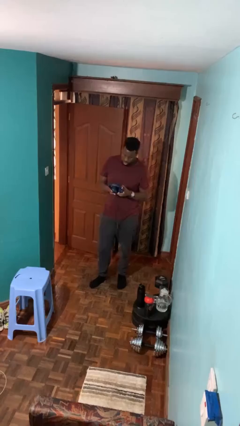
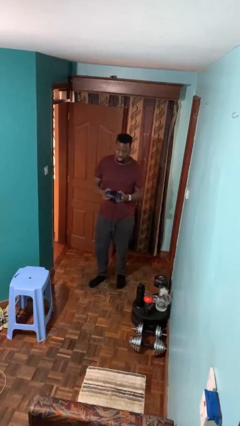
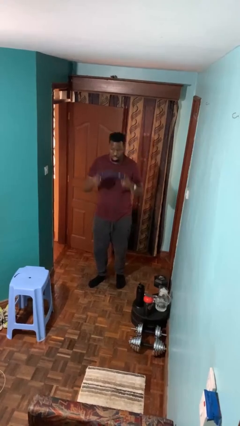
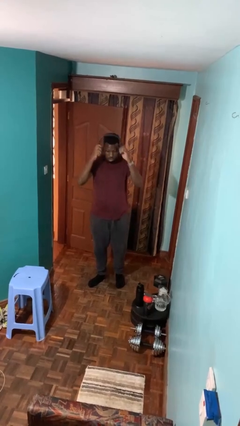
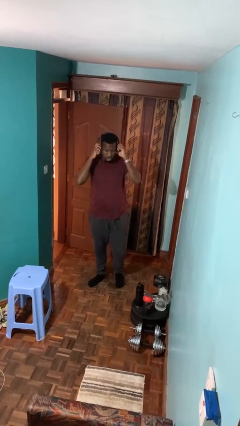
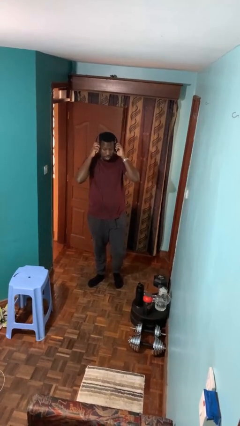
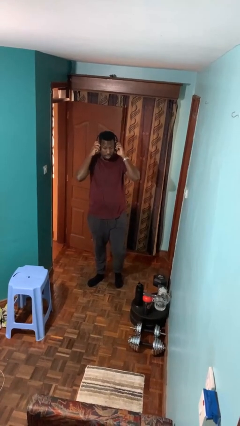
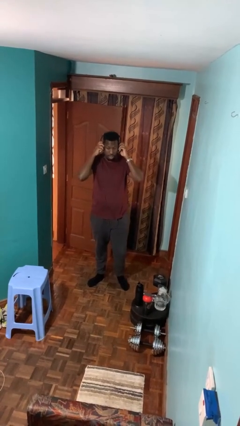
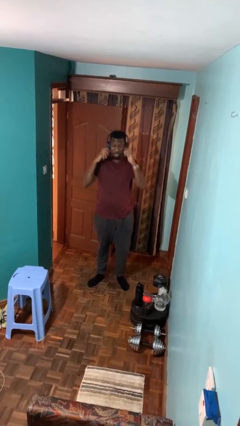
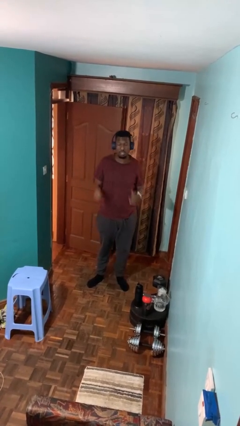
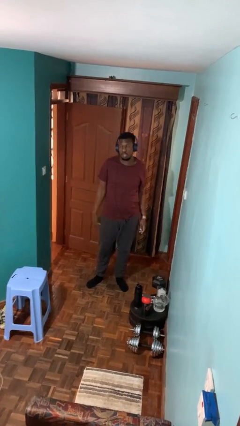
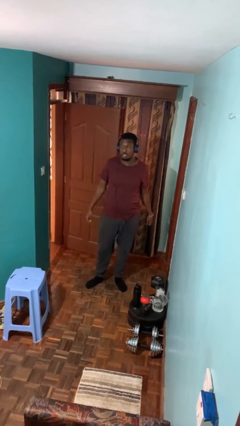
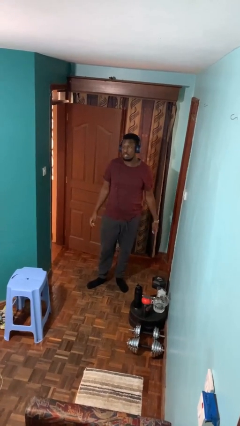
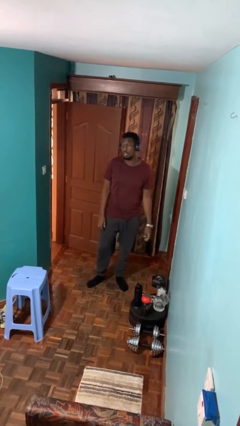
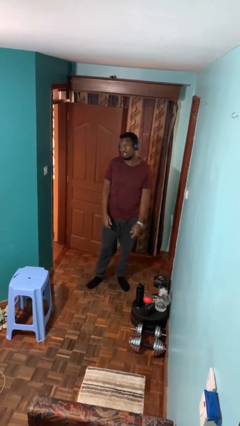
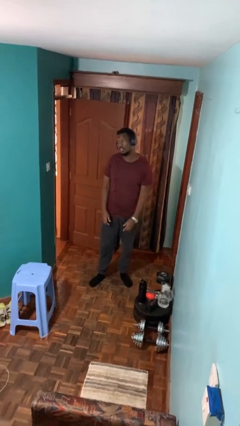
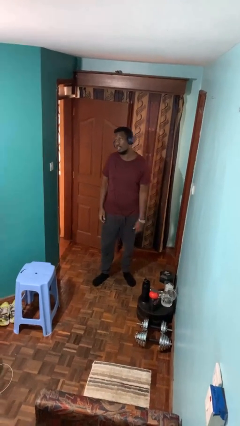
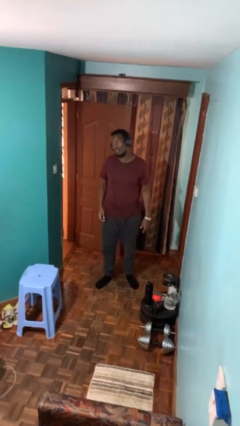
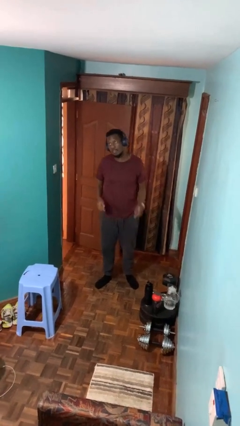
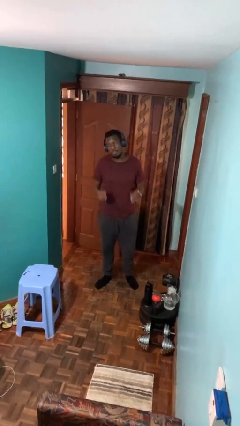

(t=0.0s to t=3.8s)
person puts on headphones

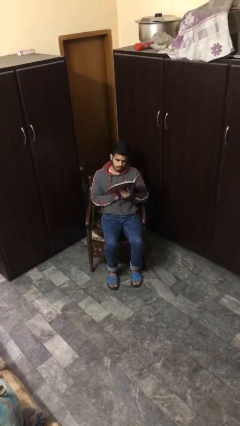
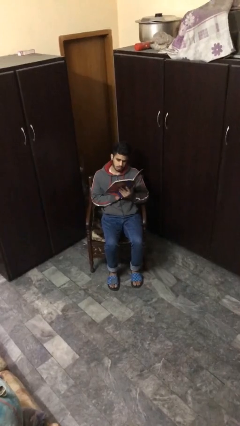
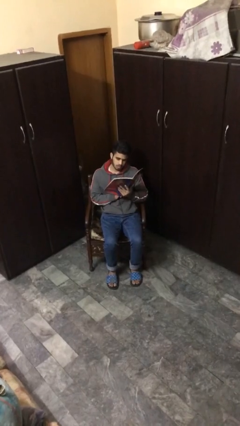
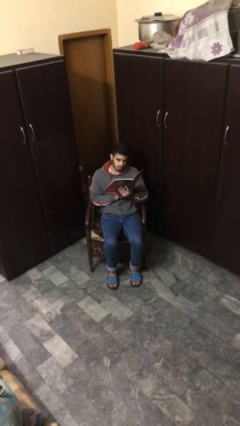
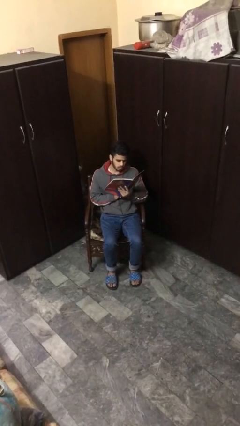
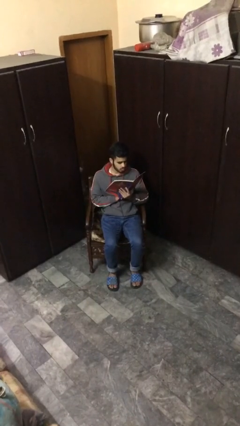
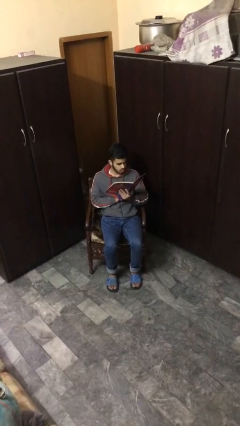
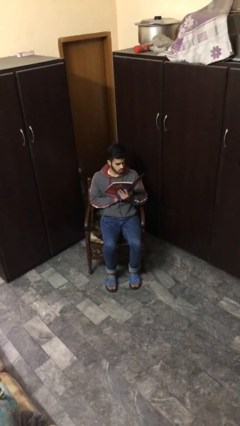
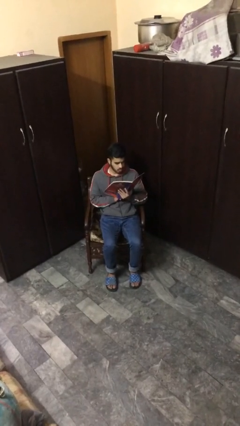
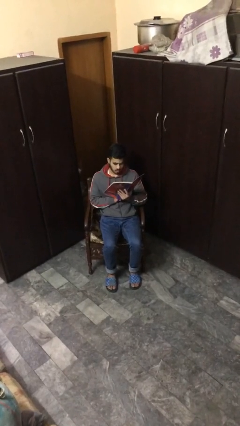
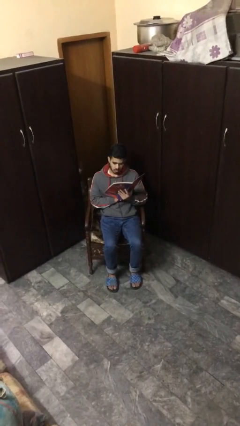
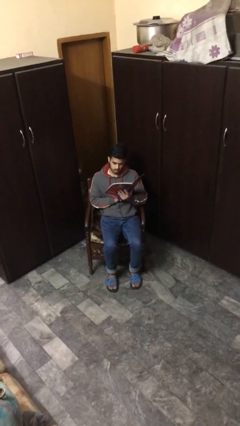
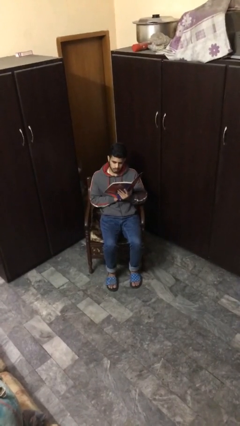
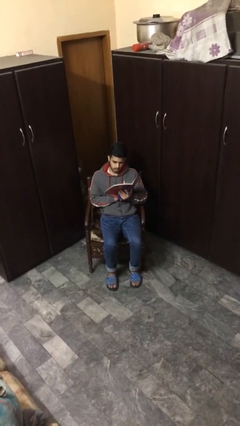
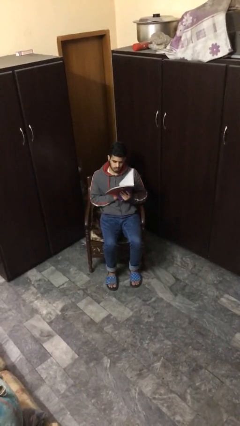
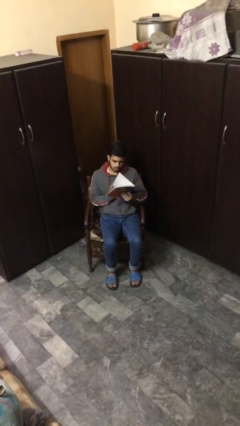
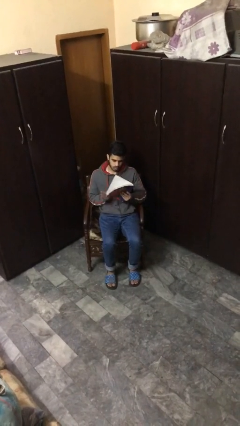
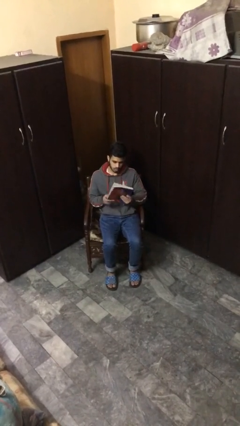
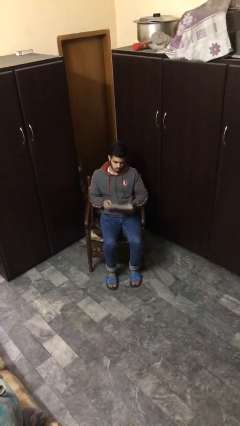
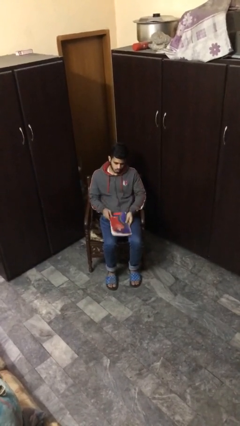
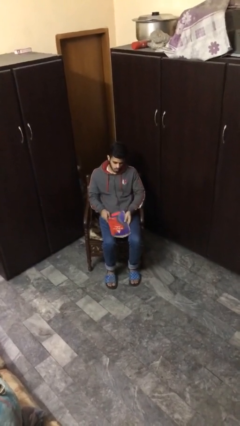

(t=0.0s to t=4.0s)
person reads document

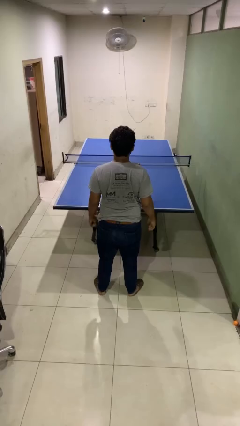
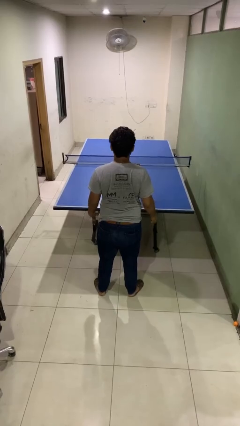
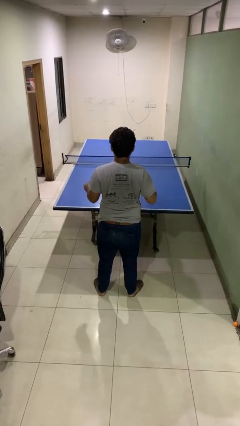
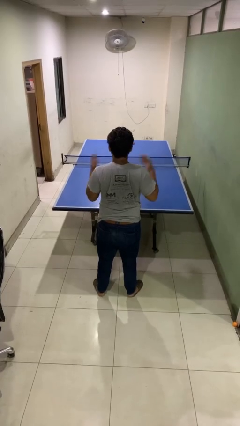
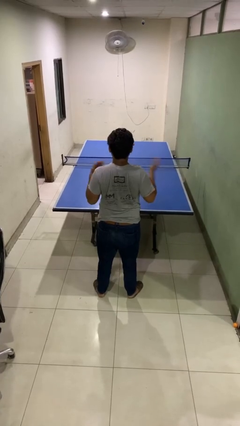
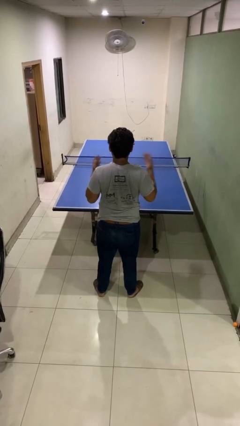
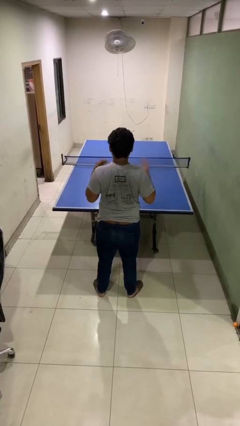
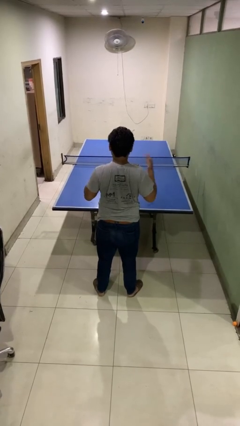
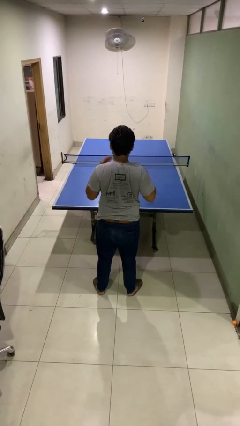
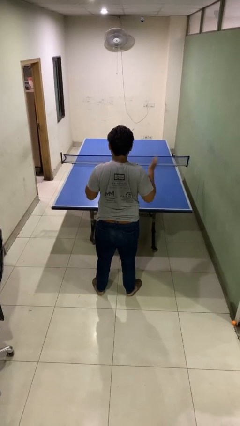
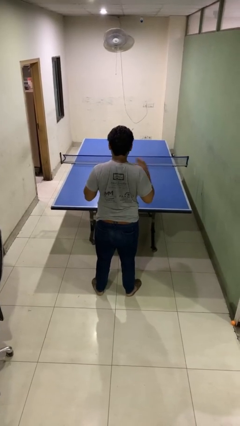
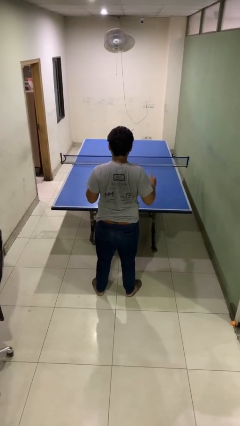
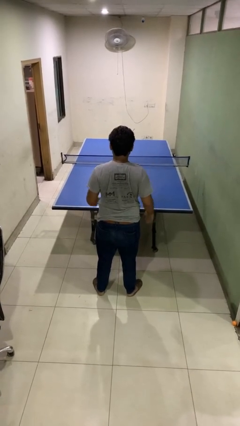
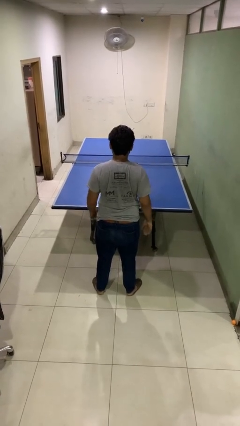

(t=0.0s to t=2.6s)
person drums on chest

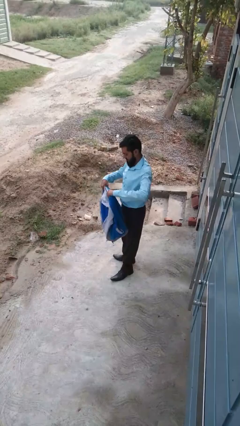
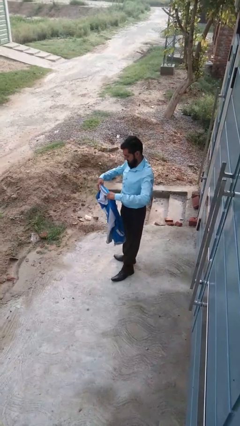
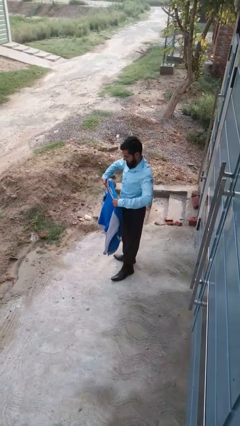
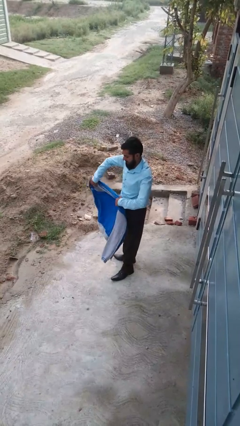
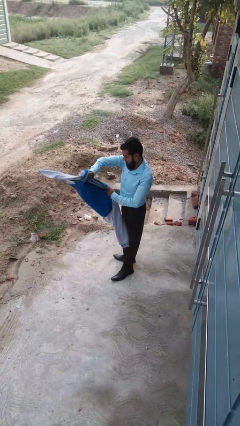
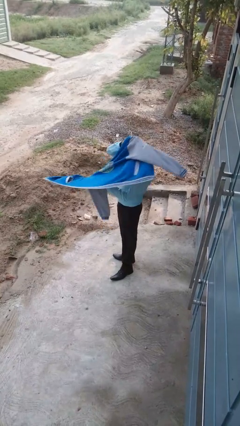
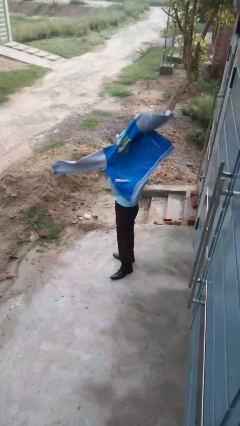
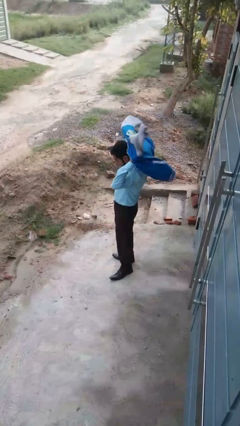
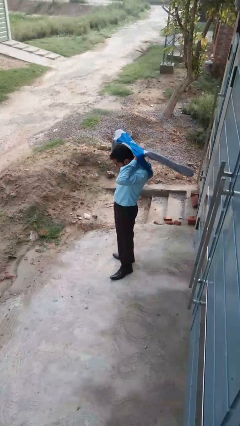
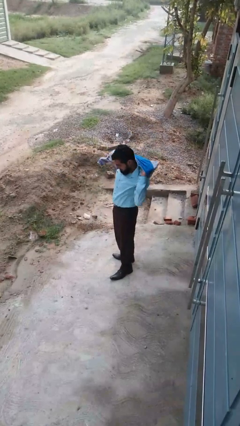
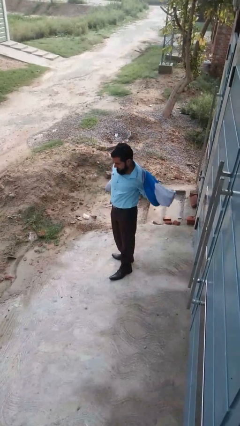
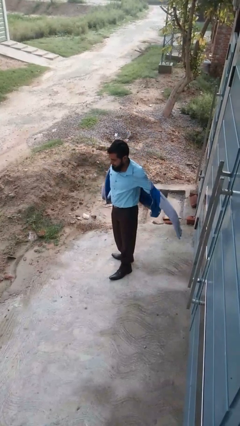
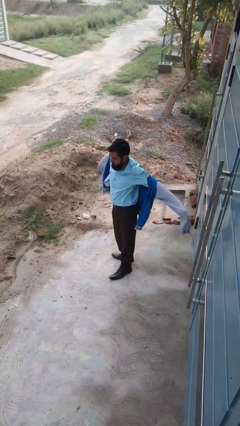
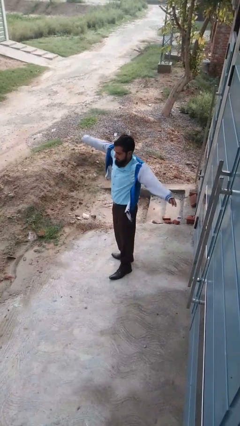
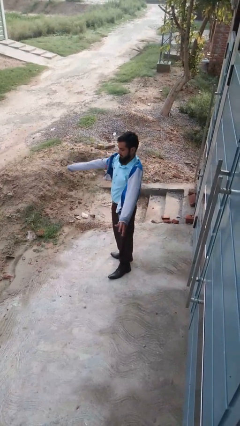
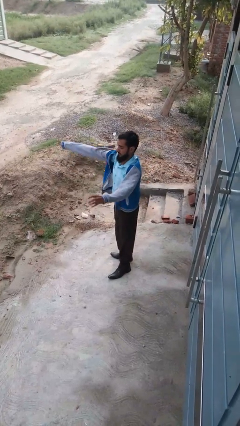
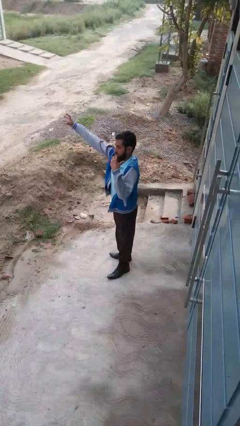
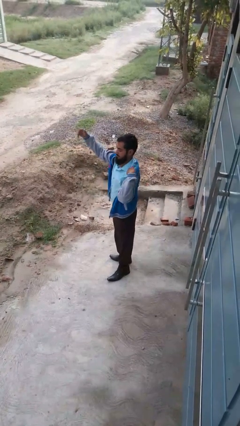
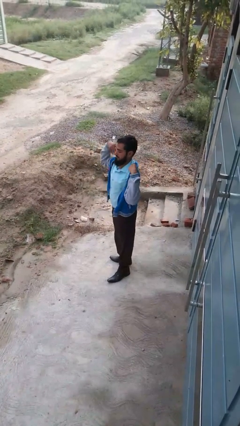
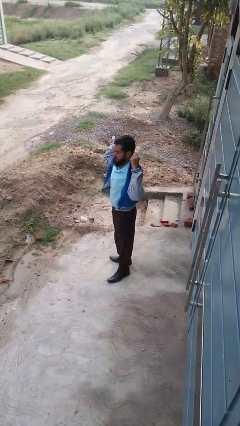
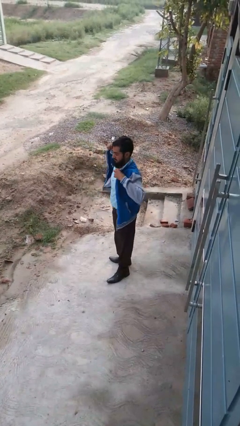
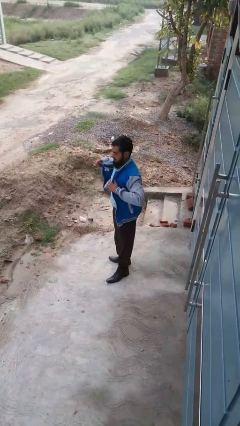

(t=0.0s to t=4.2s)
person puts on jacket

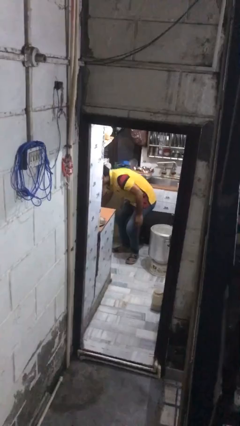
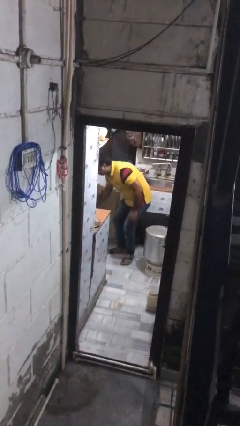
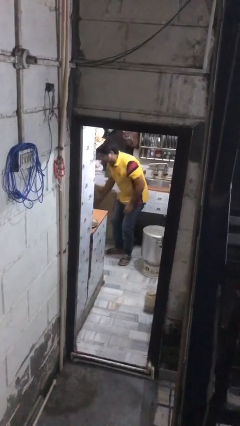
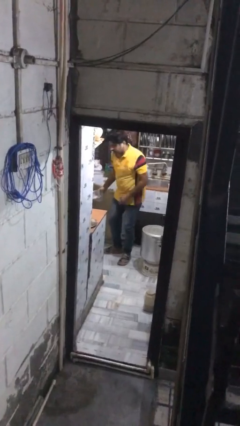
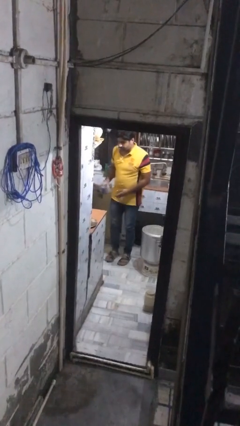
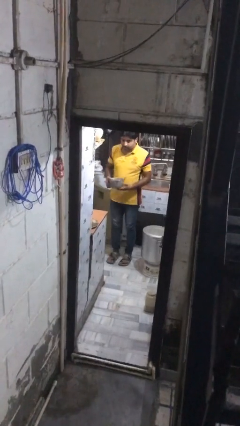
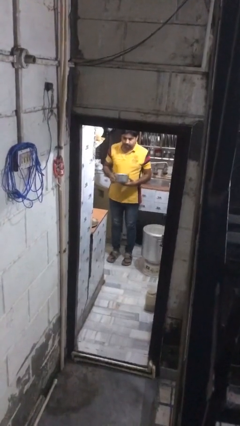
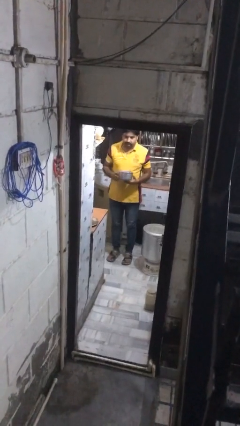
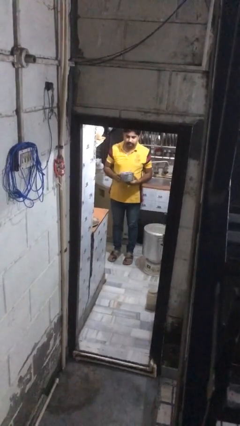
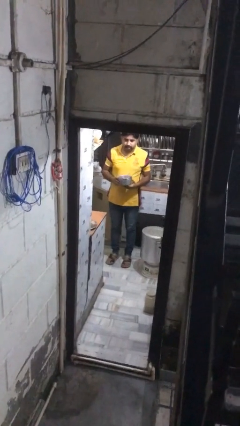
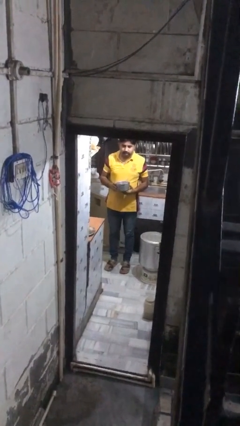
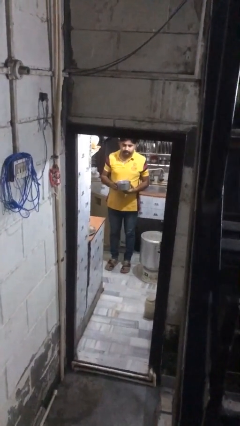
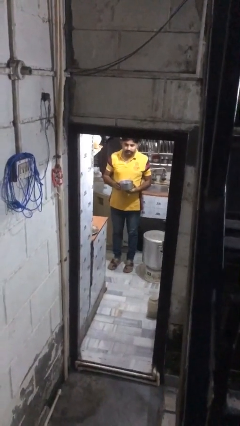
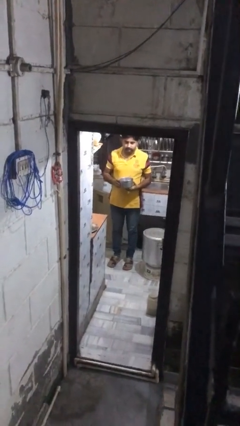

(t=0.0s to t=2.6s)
person takes object from kitchen drawer

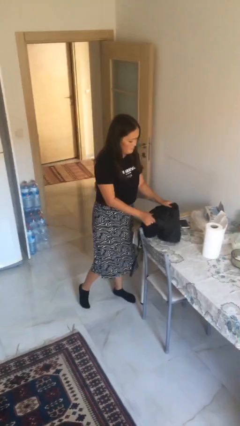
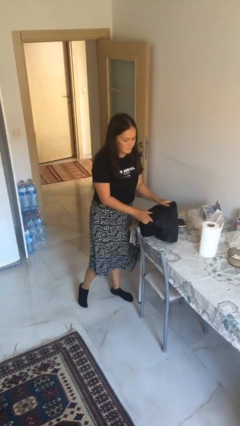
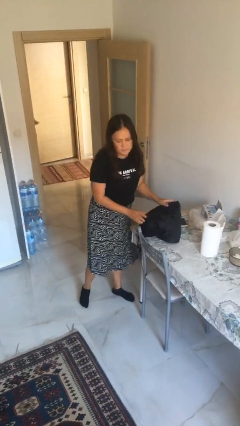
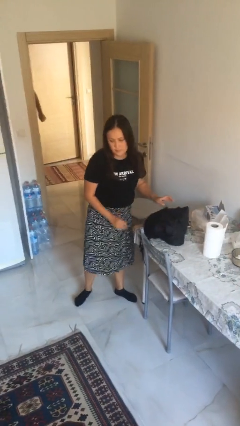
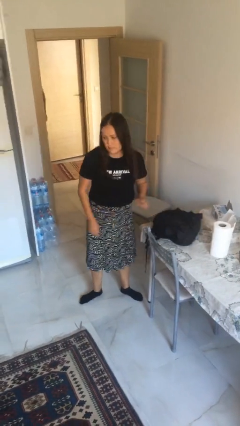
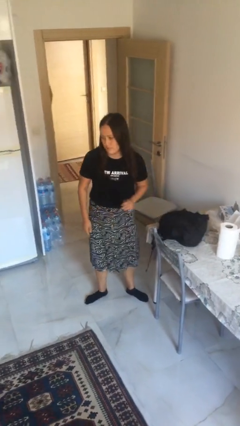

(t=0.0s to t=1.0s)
person puts down object on table
